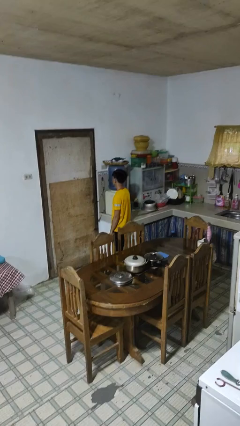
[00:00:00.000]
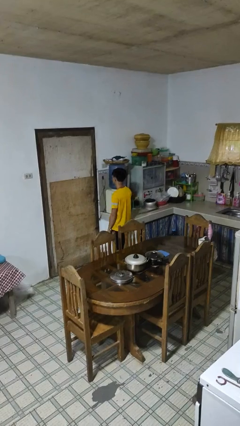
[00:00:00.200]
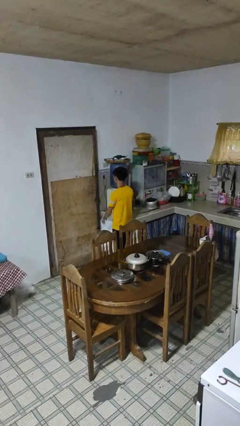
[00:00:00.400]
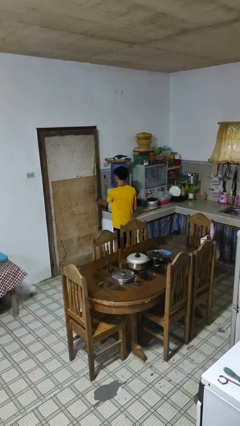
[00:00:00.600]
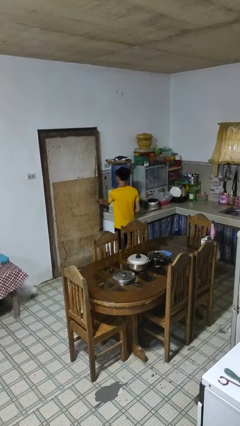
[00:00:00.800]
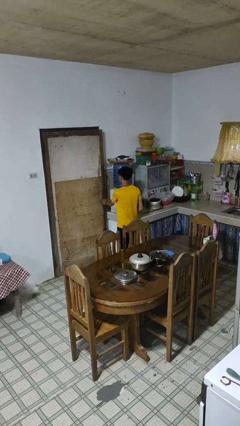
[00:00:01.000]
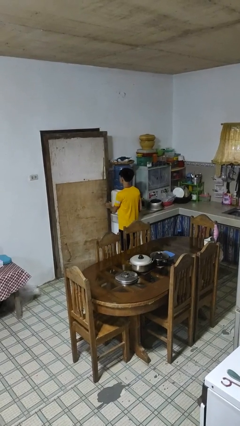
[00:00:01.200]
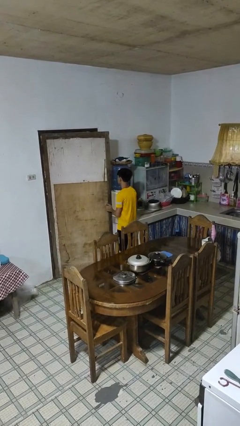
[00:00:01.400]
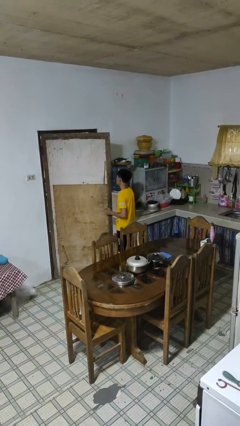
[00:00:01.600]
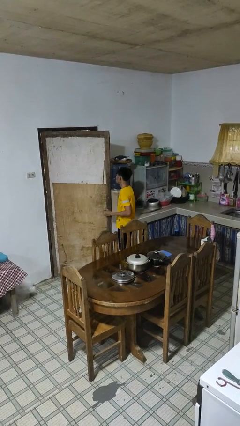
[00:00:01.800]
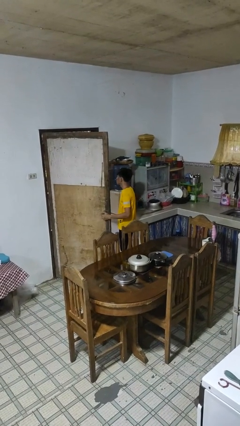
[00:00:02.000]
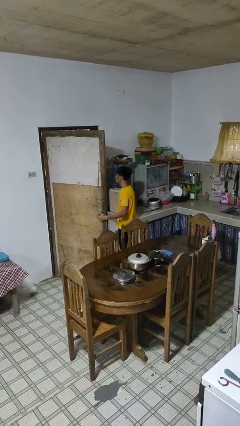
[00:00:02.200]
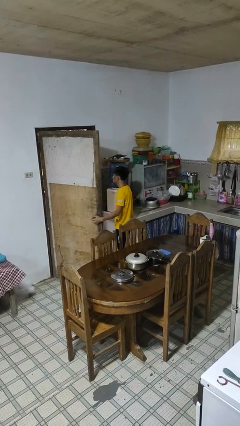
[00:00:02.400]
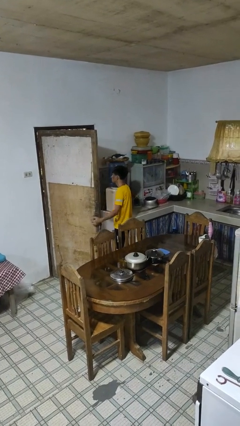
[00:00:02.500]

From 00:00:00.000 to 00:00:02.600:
person opens facility door

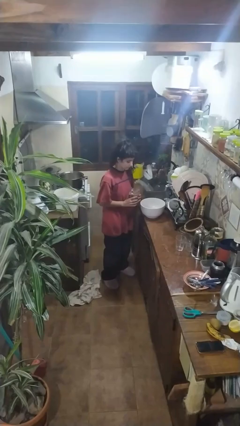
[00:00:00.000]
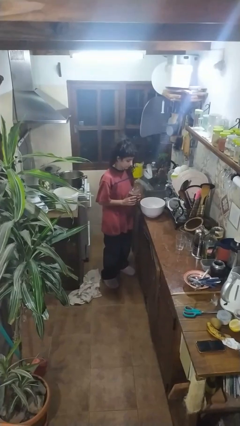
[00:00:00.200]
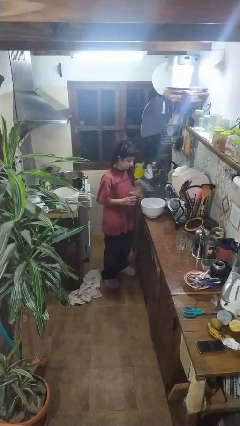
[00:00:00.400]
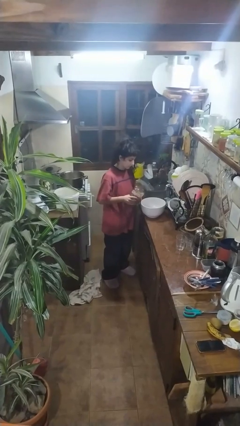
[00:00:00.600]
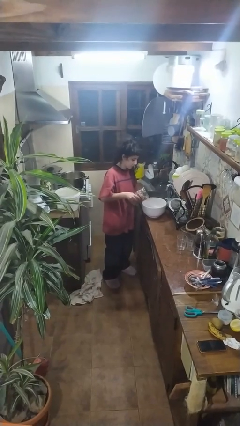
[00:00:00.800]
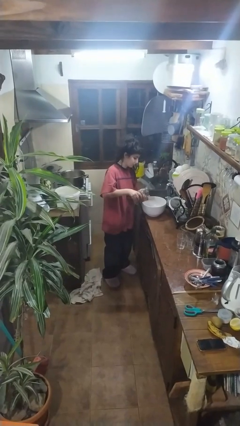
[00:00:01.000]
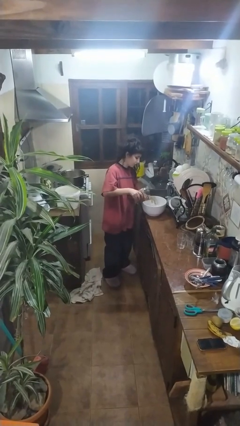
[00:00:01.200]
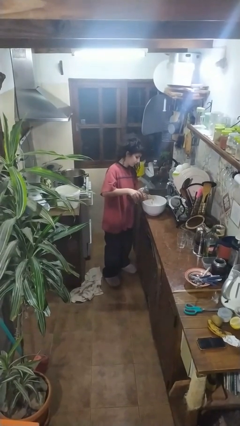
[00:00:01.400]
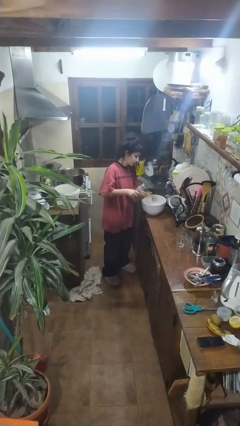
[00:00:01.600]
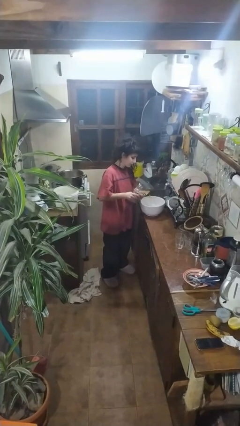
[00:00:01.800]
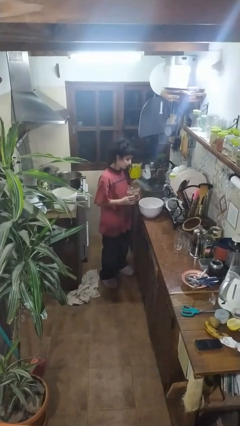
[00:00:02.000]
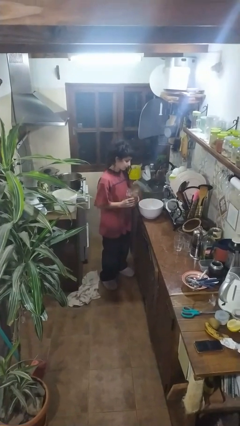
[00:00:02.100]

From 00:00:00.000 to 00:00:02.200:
person pours into bowl

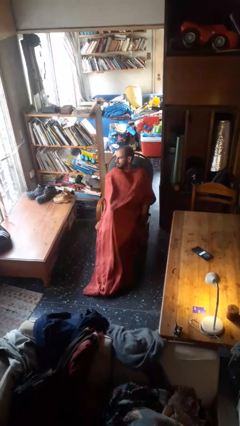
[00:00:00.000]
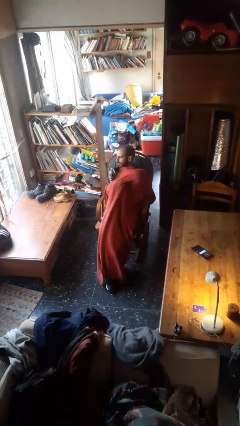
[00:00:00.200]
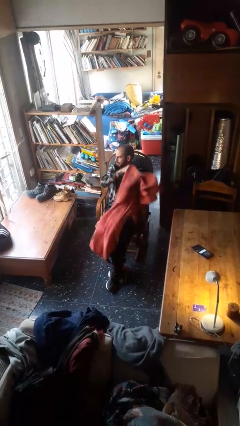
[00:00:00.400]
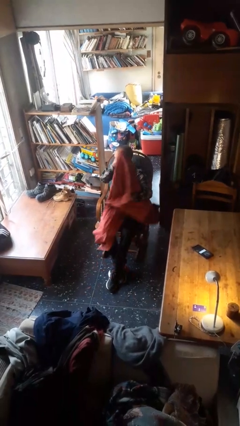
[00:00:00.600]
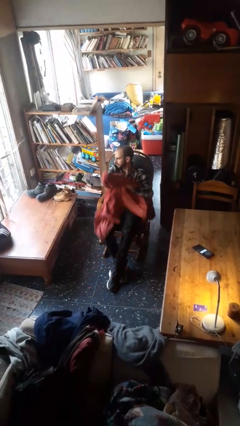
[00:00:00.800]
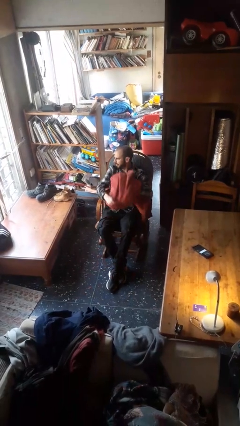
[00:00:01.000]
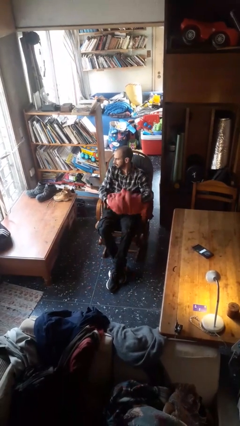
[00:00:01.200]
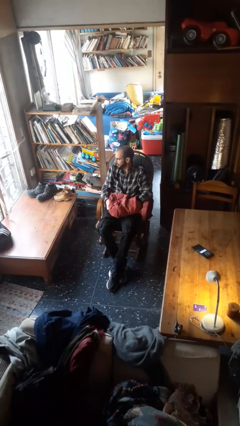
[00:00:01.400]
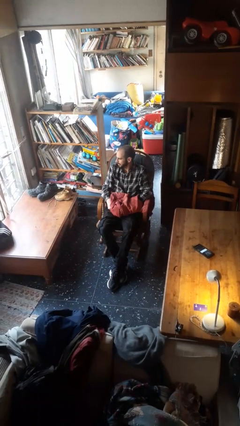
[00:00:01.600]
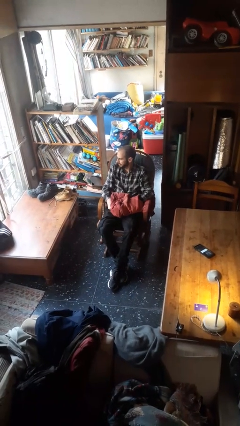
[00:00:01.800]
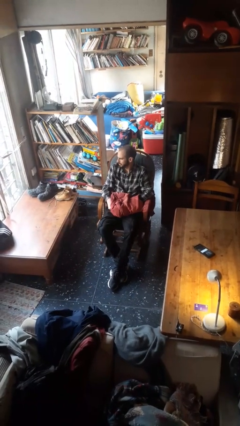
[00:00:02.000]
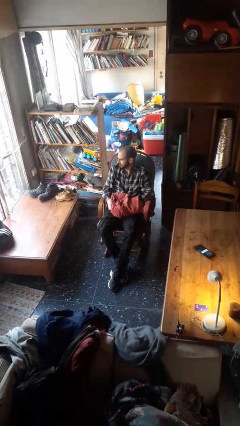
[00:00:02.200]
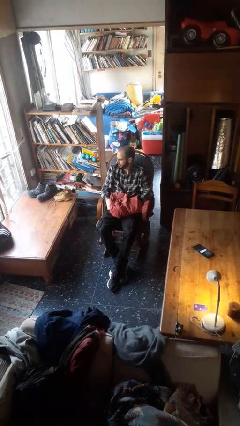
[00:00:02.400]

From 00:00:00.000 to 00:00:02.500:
person uncovers with blanket

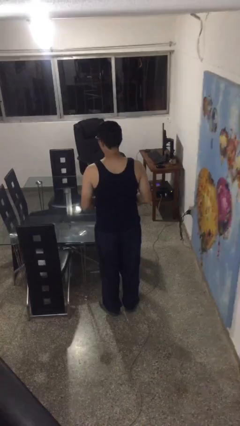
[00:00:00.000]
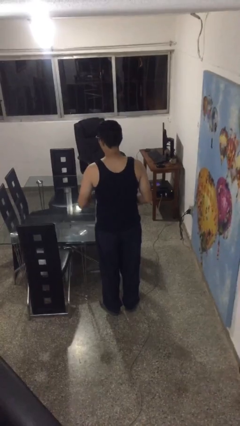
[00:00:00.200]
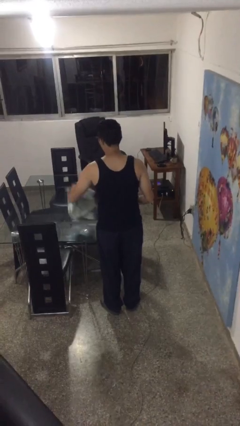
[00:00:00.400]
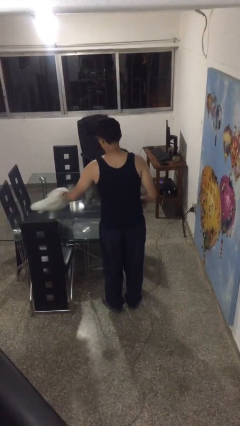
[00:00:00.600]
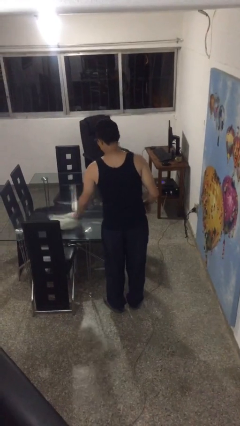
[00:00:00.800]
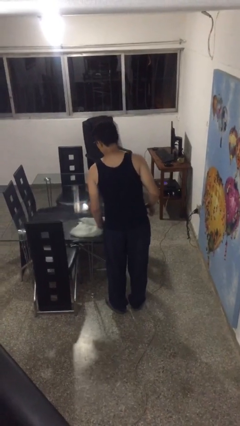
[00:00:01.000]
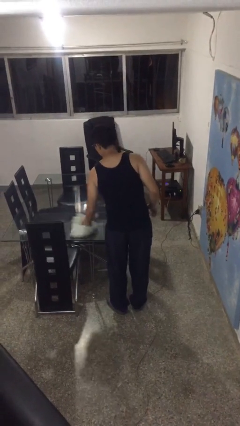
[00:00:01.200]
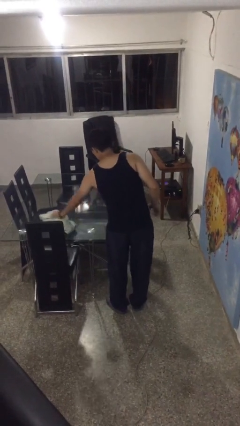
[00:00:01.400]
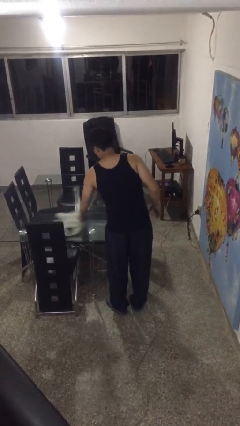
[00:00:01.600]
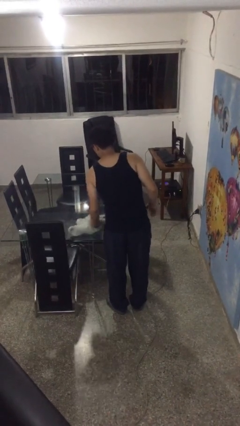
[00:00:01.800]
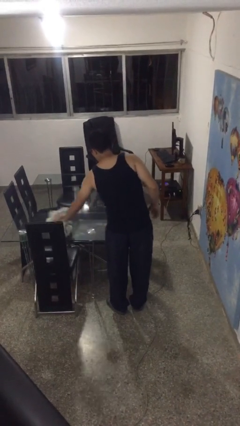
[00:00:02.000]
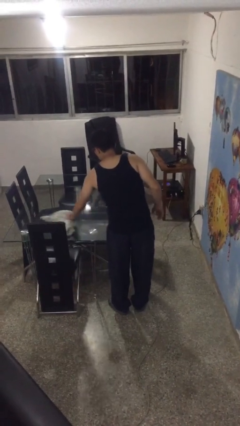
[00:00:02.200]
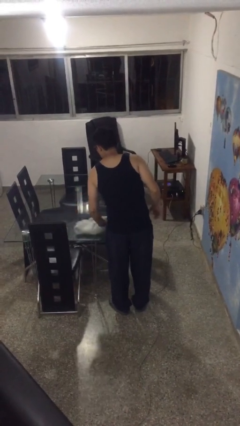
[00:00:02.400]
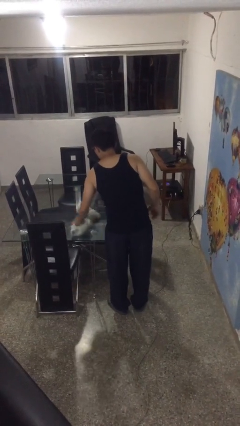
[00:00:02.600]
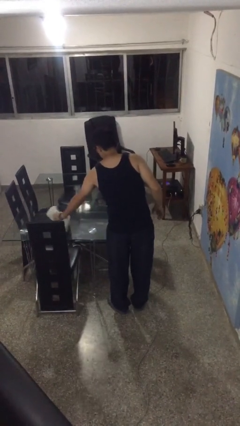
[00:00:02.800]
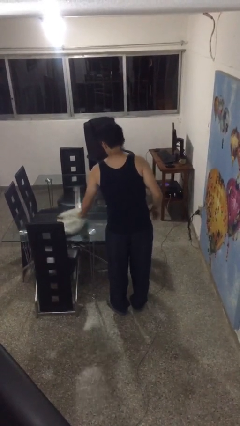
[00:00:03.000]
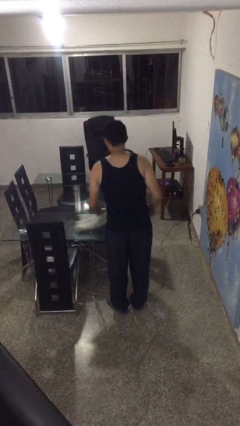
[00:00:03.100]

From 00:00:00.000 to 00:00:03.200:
person cleans table with rag

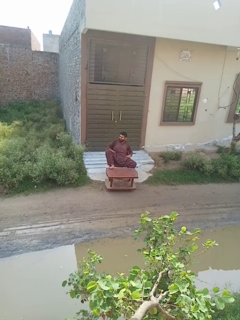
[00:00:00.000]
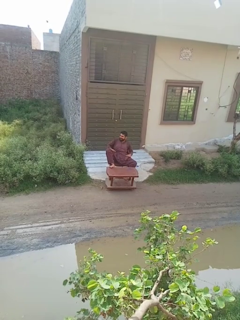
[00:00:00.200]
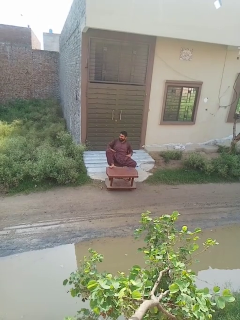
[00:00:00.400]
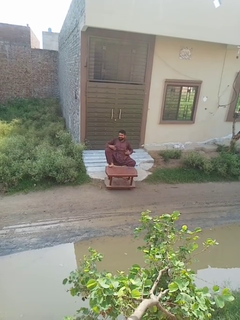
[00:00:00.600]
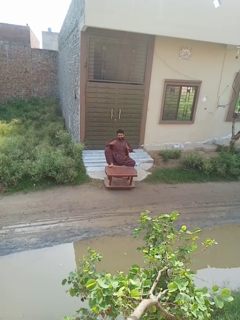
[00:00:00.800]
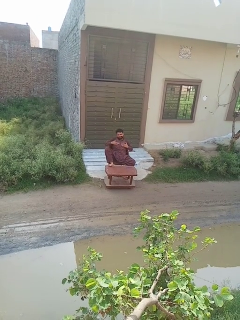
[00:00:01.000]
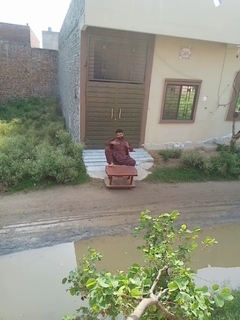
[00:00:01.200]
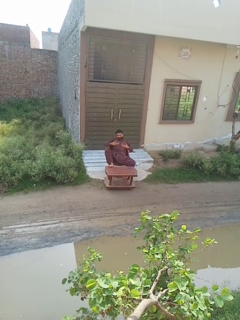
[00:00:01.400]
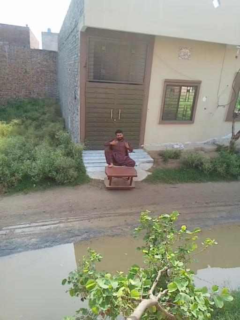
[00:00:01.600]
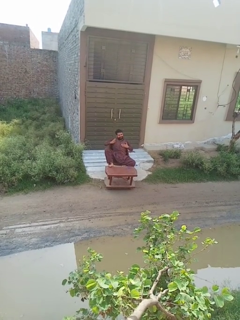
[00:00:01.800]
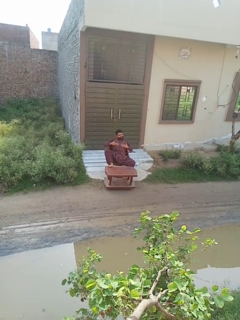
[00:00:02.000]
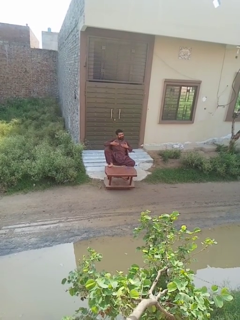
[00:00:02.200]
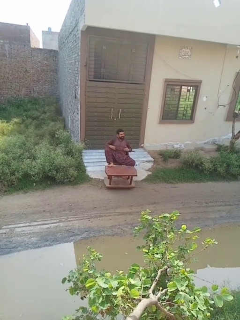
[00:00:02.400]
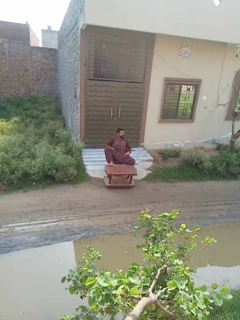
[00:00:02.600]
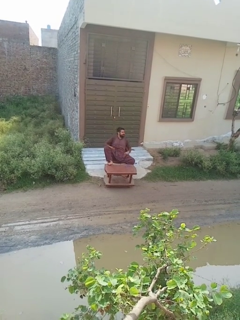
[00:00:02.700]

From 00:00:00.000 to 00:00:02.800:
person drums on chest

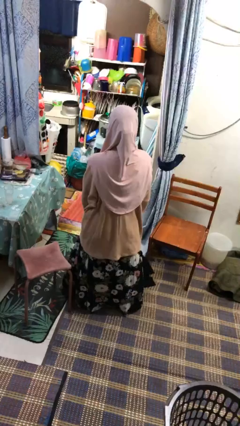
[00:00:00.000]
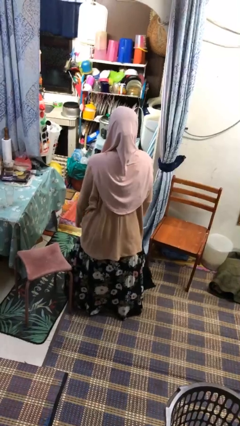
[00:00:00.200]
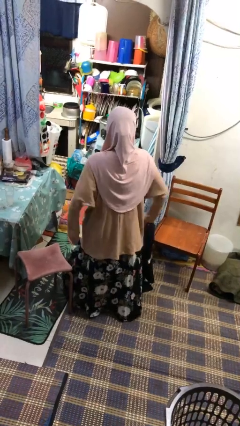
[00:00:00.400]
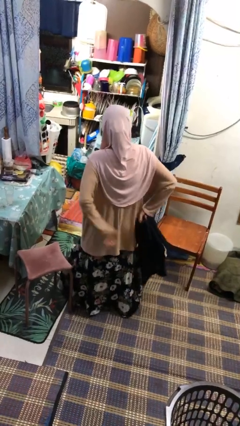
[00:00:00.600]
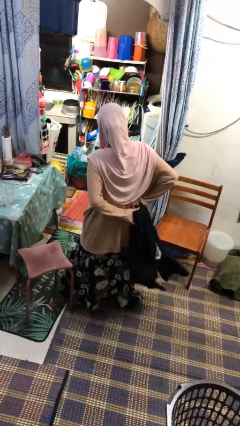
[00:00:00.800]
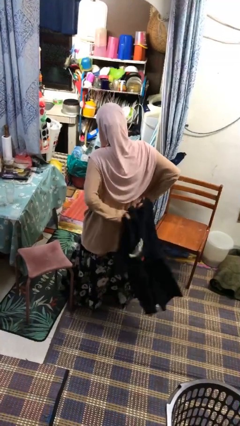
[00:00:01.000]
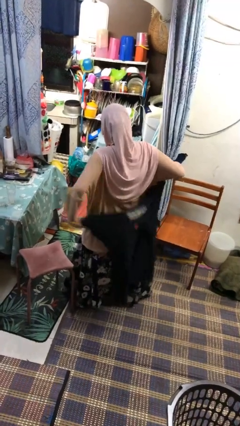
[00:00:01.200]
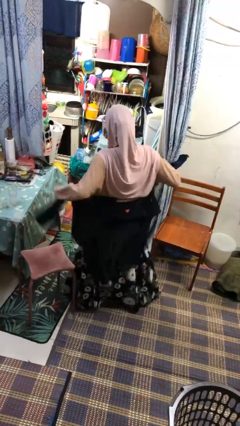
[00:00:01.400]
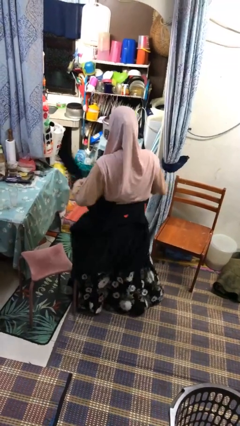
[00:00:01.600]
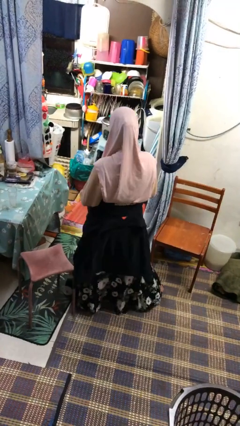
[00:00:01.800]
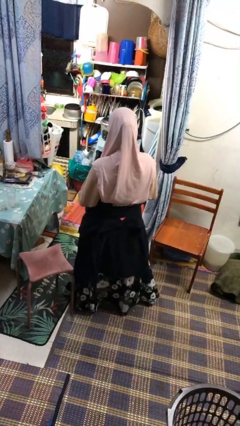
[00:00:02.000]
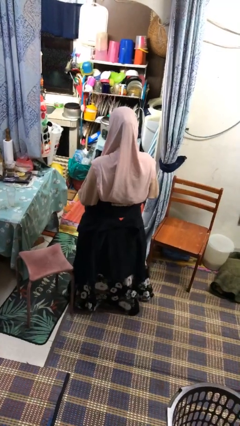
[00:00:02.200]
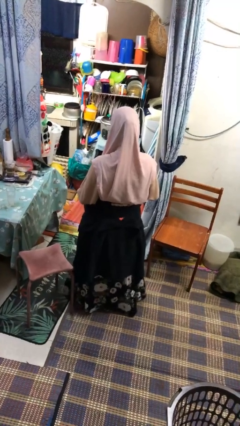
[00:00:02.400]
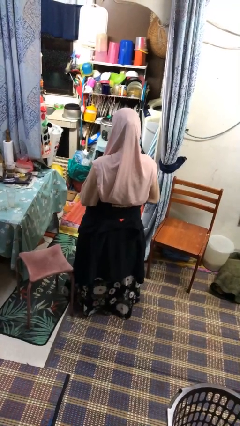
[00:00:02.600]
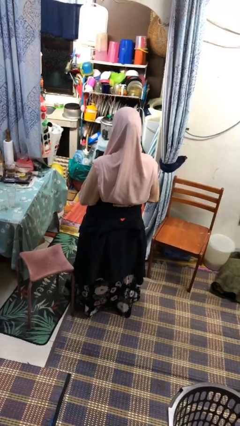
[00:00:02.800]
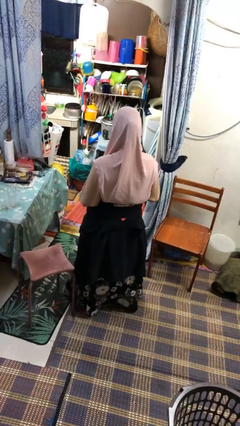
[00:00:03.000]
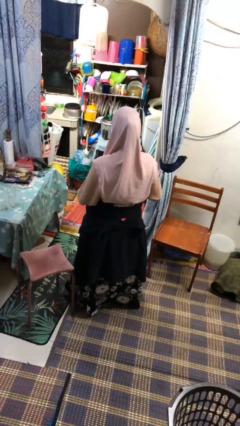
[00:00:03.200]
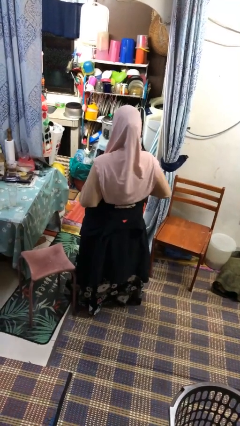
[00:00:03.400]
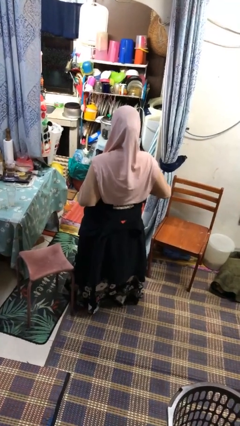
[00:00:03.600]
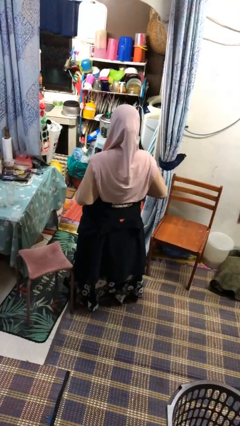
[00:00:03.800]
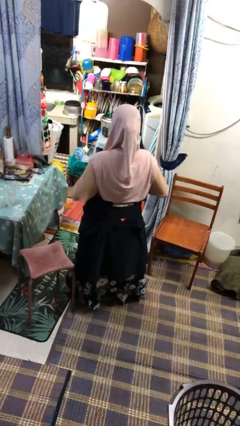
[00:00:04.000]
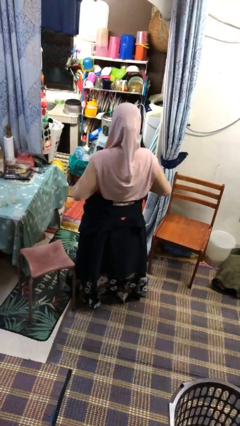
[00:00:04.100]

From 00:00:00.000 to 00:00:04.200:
person ties jacket around waist

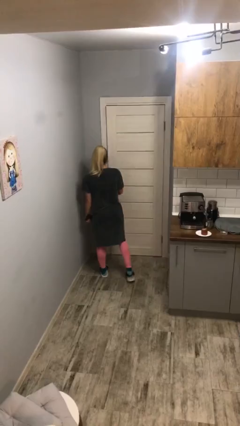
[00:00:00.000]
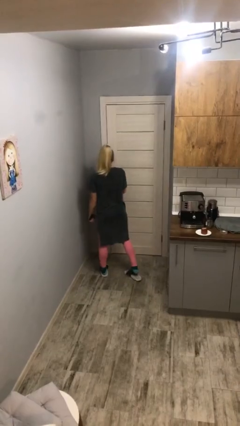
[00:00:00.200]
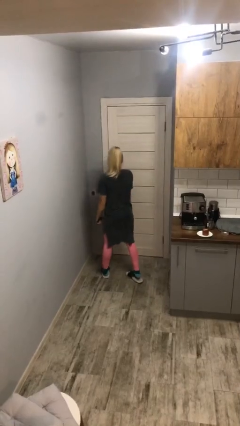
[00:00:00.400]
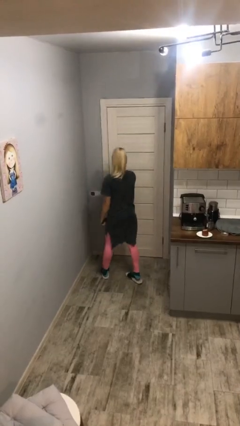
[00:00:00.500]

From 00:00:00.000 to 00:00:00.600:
person closes facility door
